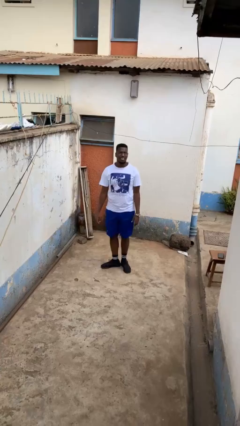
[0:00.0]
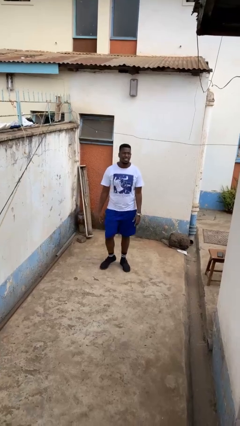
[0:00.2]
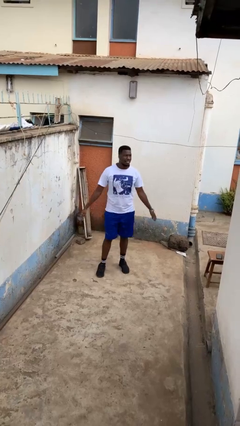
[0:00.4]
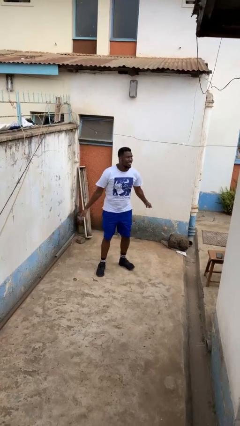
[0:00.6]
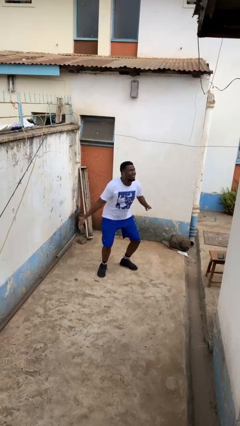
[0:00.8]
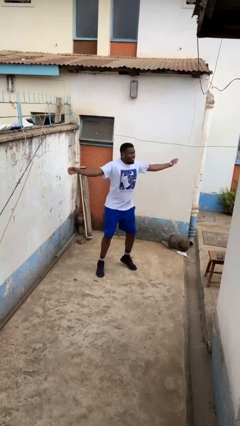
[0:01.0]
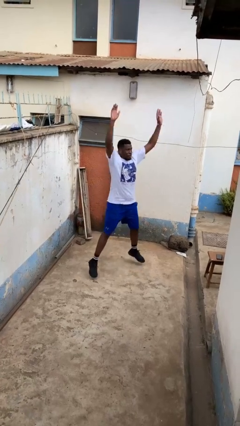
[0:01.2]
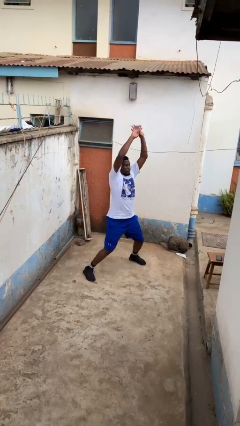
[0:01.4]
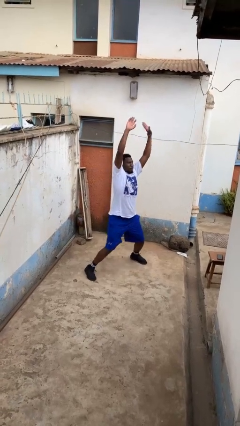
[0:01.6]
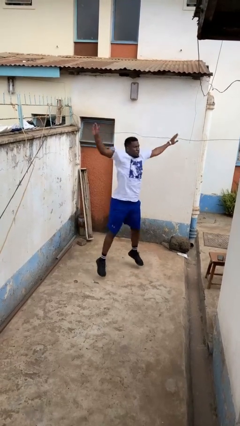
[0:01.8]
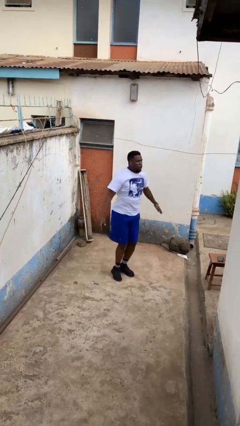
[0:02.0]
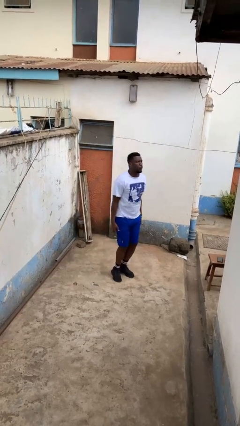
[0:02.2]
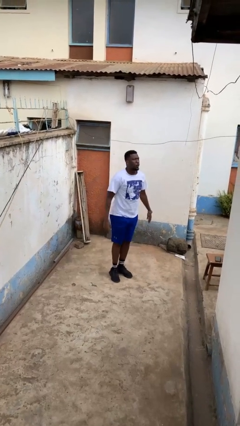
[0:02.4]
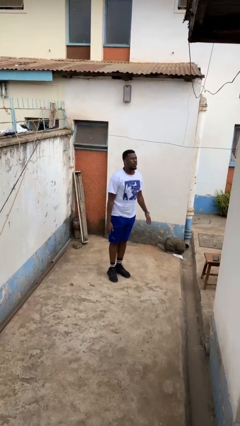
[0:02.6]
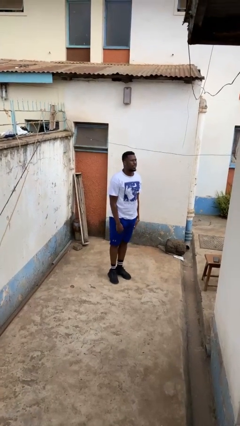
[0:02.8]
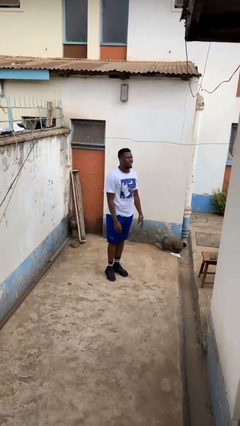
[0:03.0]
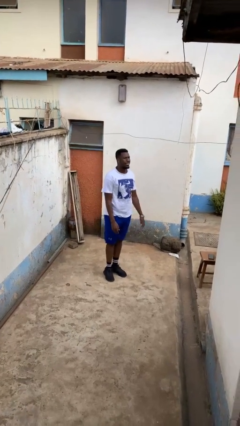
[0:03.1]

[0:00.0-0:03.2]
person exercises with jumping jacks

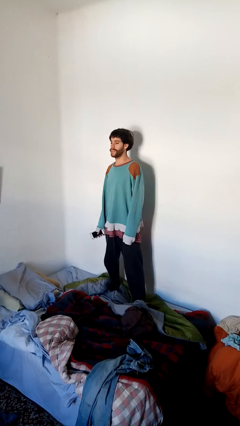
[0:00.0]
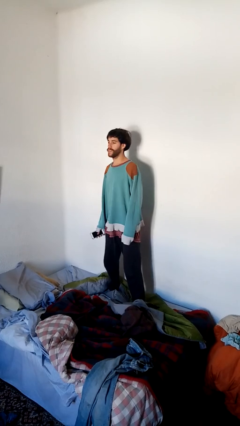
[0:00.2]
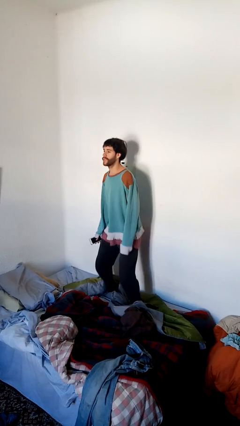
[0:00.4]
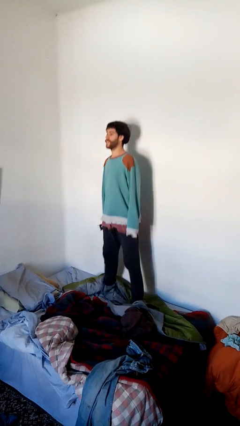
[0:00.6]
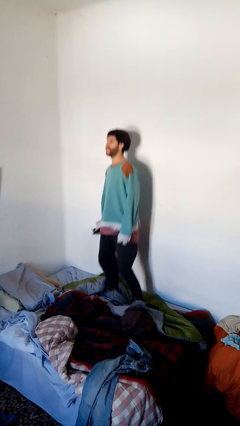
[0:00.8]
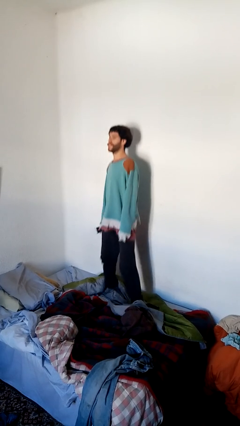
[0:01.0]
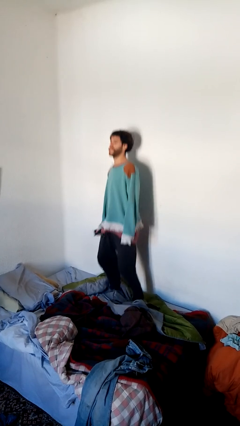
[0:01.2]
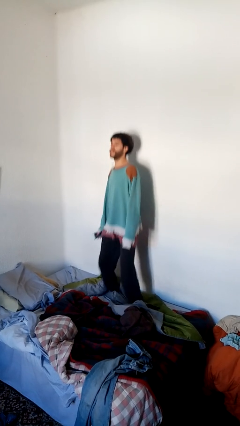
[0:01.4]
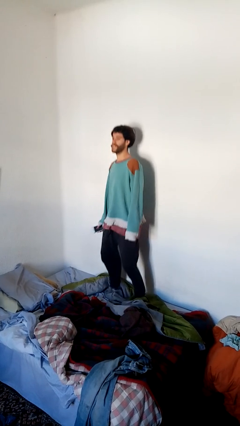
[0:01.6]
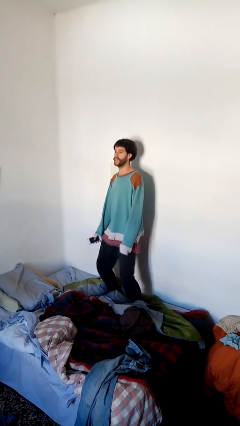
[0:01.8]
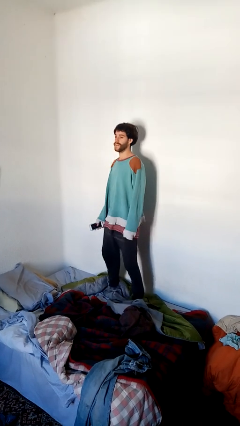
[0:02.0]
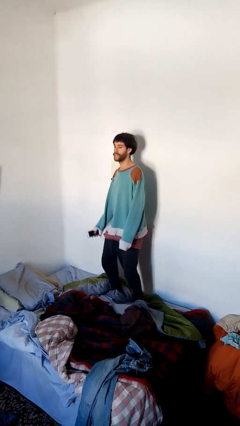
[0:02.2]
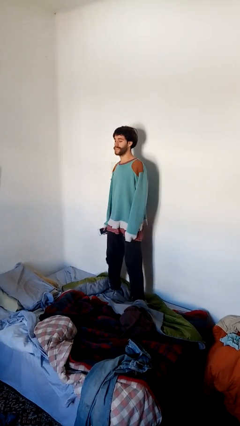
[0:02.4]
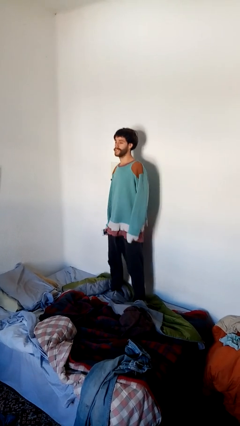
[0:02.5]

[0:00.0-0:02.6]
person jumps on bed

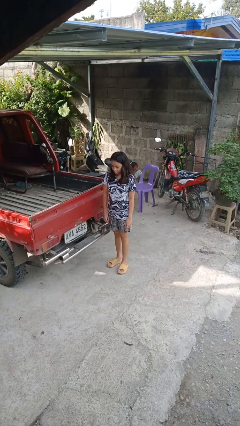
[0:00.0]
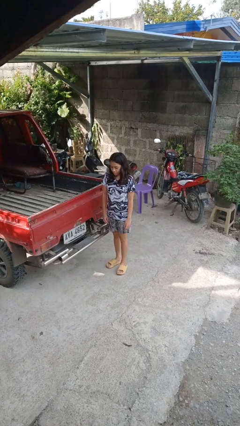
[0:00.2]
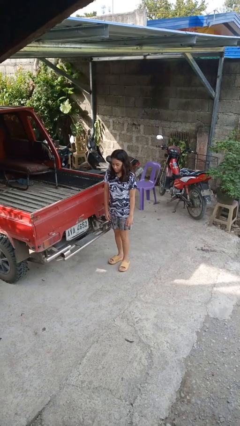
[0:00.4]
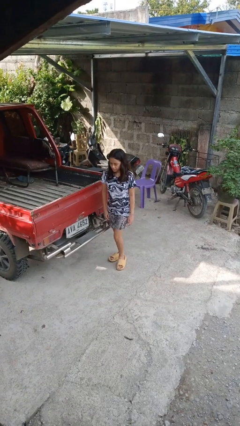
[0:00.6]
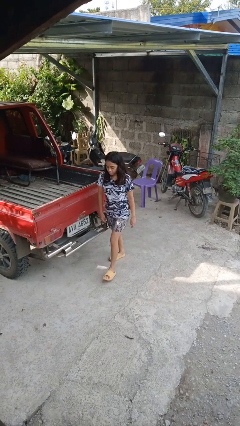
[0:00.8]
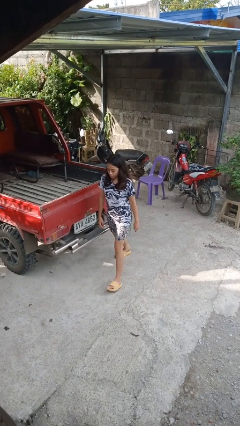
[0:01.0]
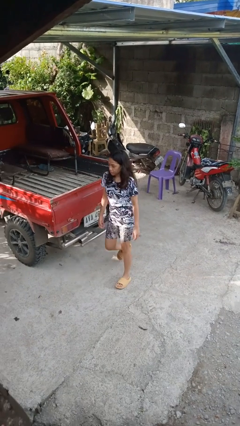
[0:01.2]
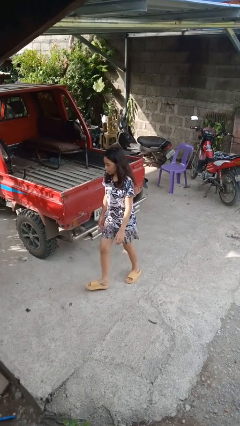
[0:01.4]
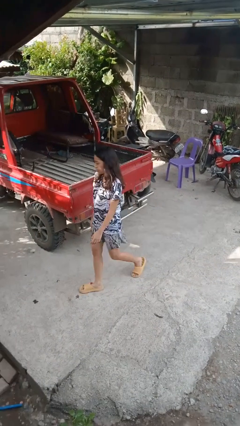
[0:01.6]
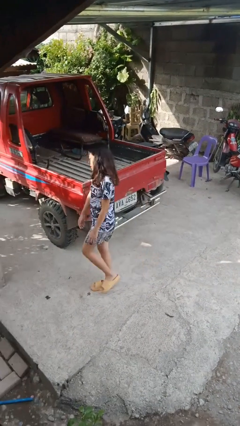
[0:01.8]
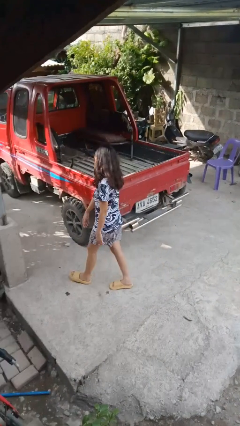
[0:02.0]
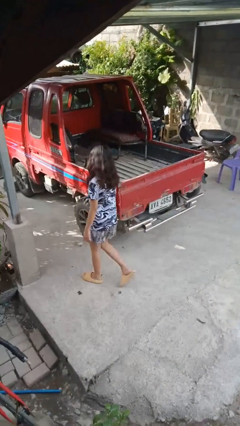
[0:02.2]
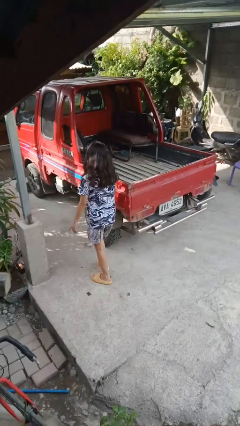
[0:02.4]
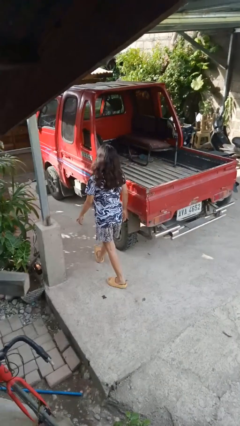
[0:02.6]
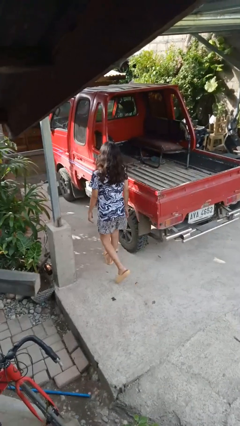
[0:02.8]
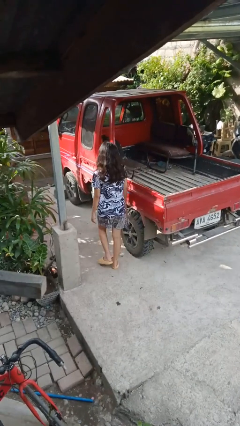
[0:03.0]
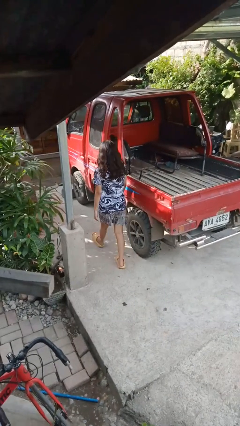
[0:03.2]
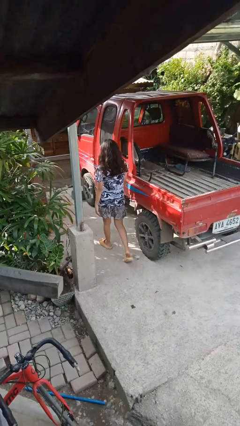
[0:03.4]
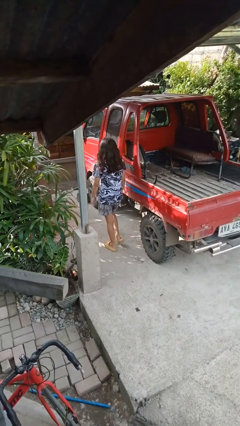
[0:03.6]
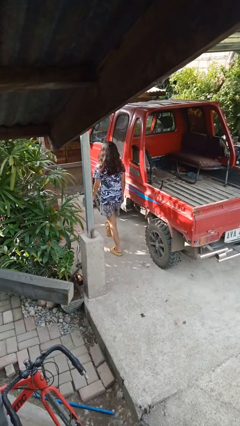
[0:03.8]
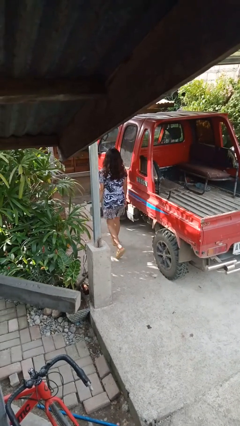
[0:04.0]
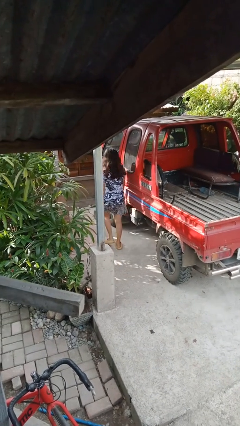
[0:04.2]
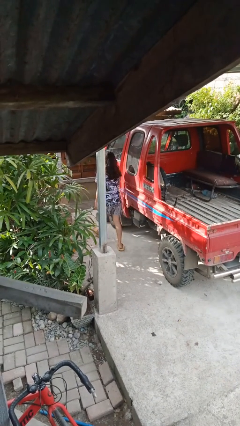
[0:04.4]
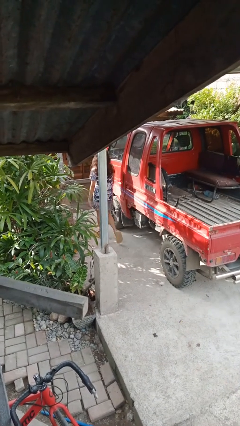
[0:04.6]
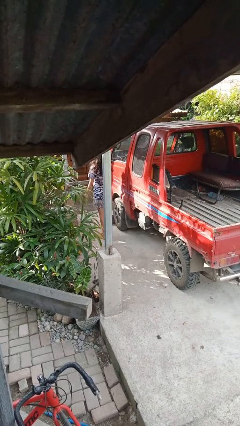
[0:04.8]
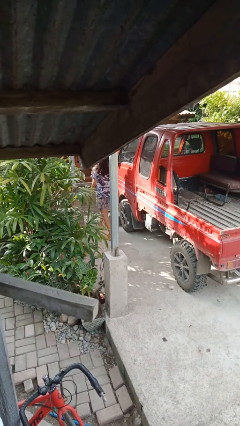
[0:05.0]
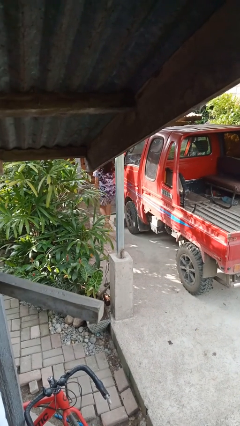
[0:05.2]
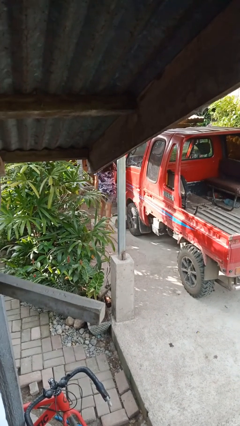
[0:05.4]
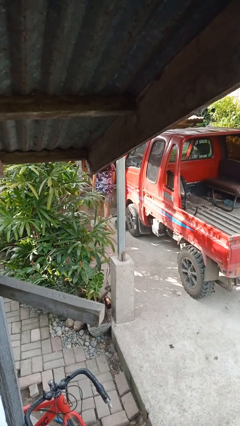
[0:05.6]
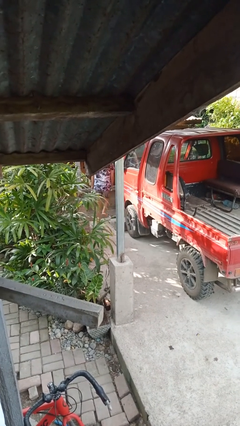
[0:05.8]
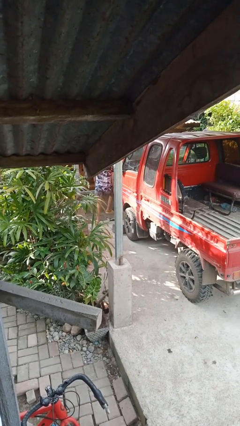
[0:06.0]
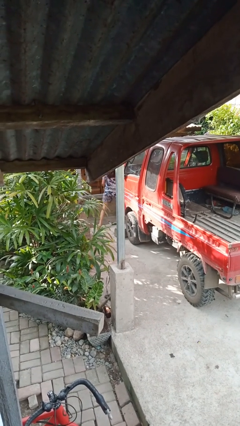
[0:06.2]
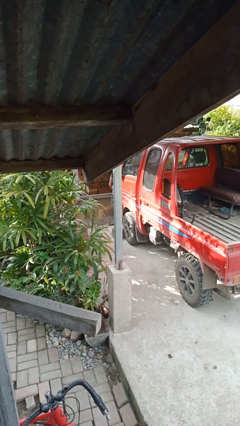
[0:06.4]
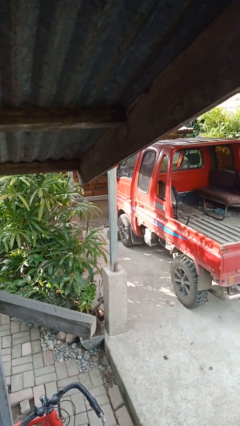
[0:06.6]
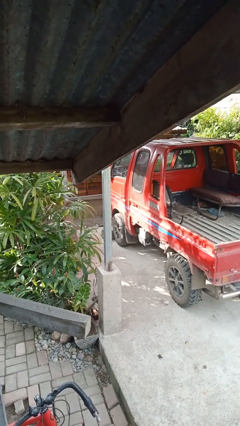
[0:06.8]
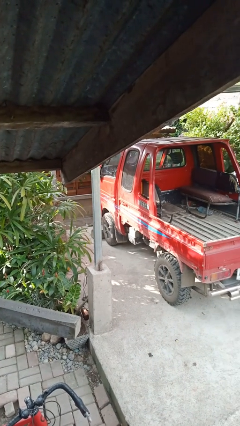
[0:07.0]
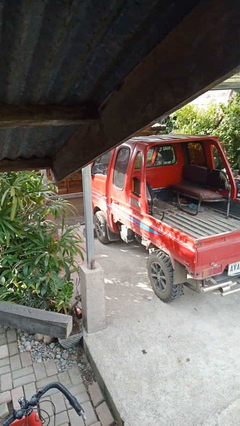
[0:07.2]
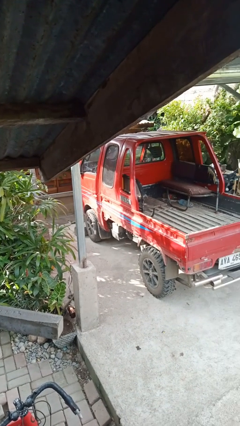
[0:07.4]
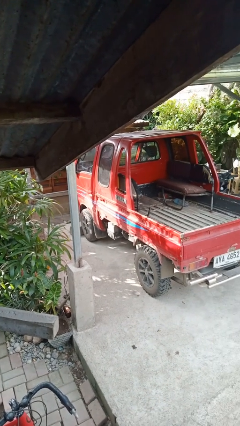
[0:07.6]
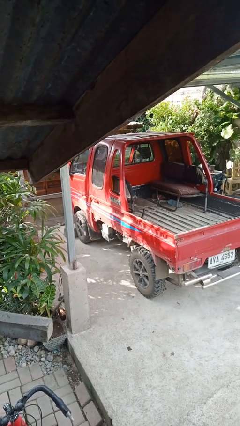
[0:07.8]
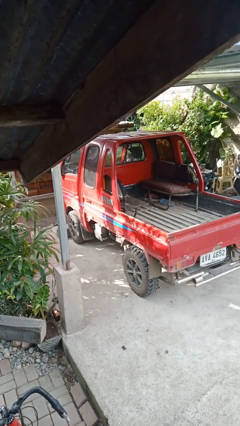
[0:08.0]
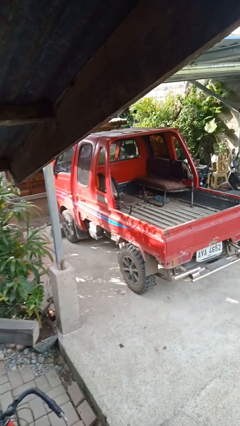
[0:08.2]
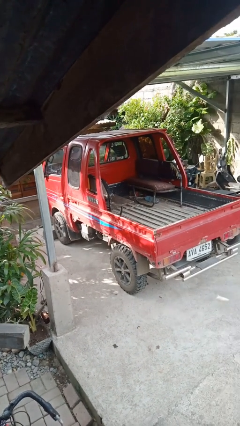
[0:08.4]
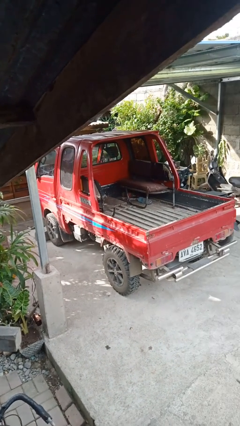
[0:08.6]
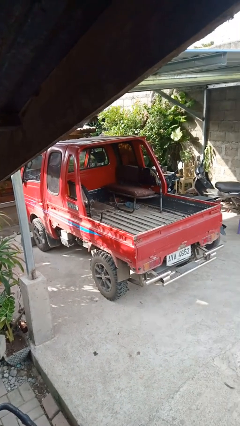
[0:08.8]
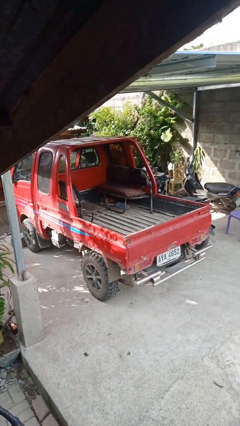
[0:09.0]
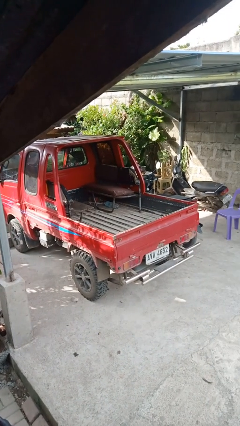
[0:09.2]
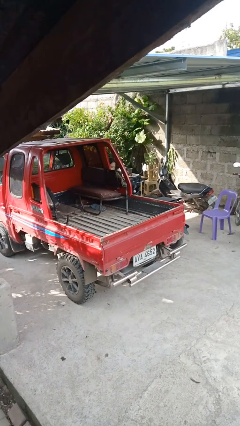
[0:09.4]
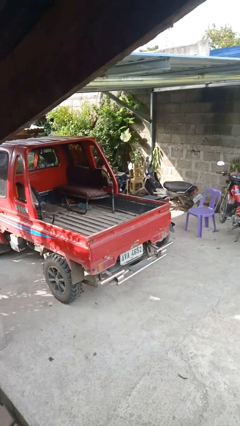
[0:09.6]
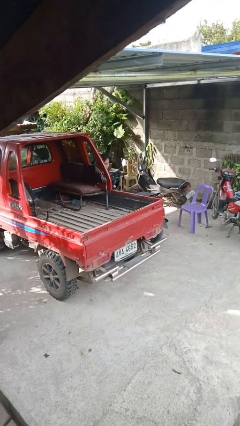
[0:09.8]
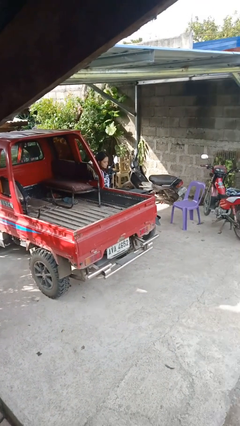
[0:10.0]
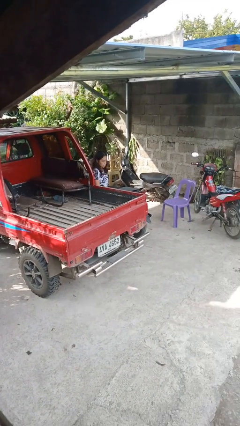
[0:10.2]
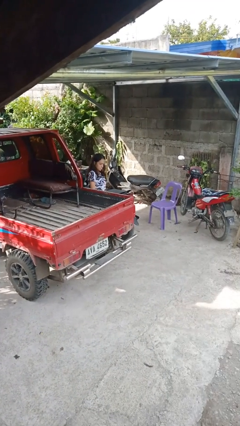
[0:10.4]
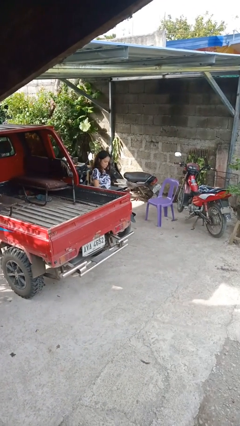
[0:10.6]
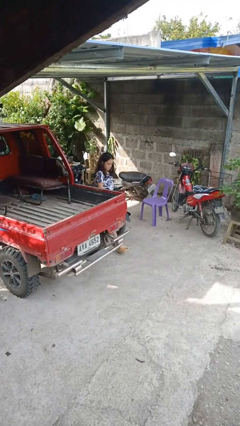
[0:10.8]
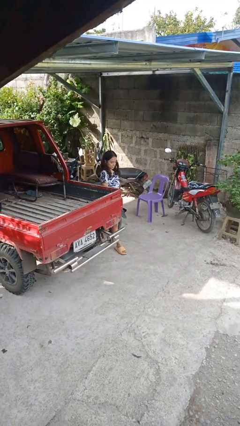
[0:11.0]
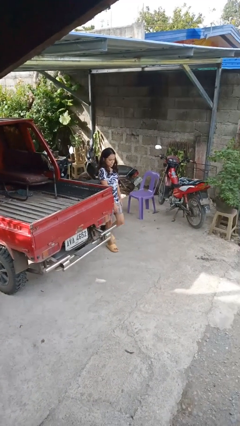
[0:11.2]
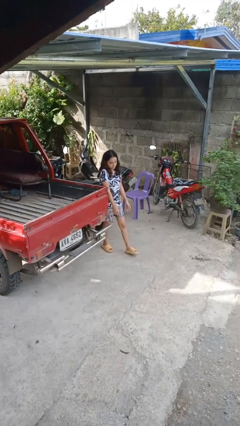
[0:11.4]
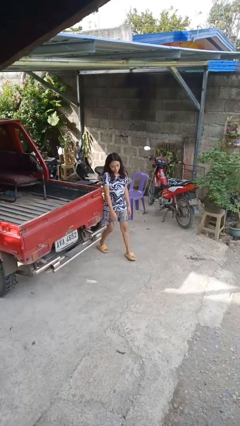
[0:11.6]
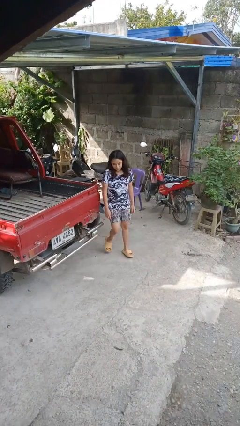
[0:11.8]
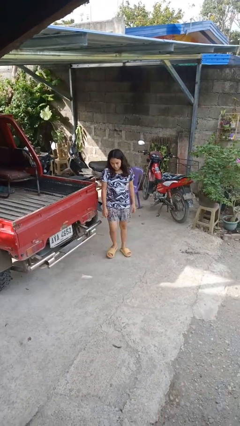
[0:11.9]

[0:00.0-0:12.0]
person walks around car

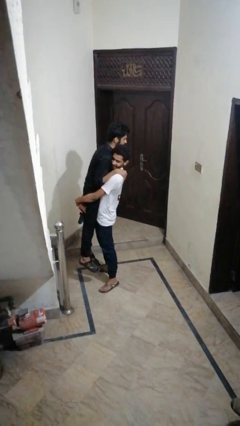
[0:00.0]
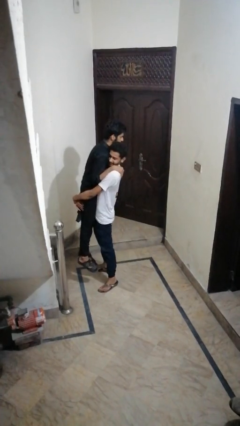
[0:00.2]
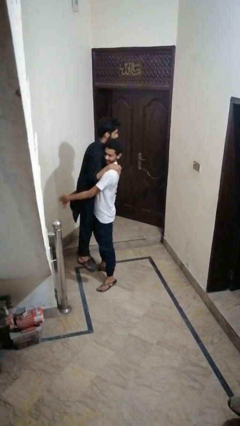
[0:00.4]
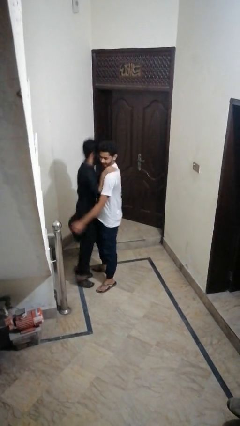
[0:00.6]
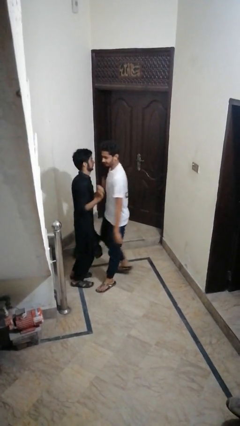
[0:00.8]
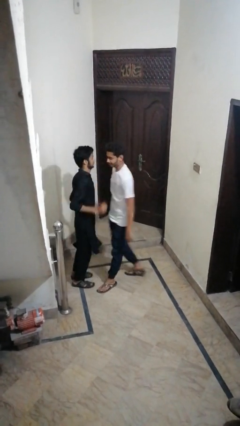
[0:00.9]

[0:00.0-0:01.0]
person takes off facemask
